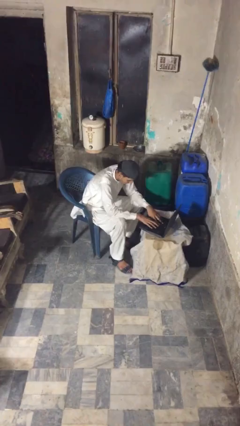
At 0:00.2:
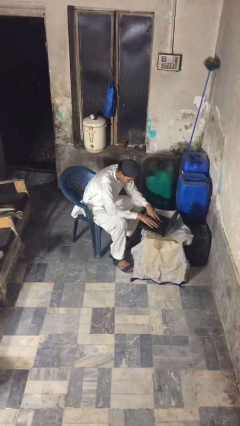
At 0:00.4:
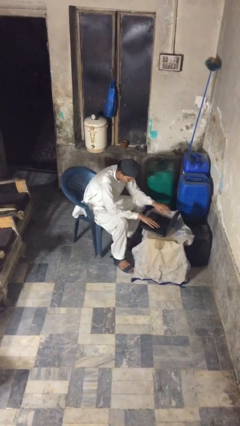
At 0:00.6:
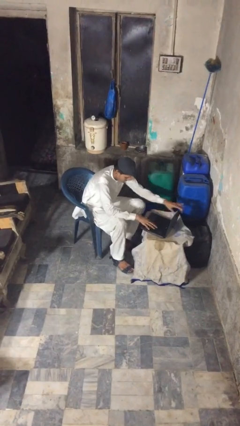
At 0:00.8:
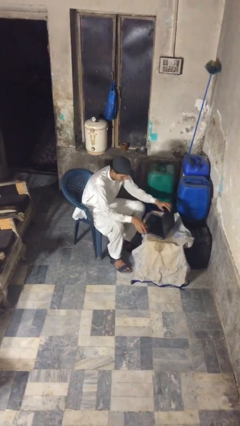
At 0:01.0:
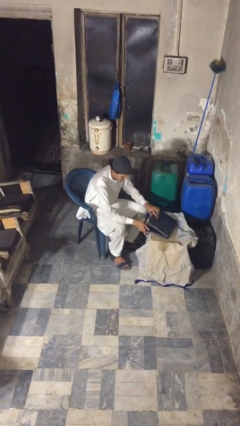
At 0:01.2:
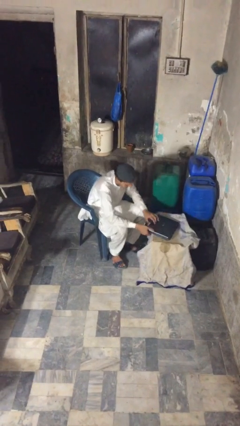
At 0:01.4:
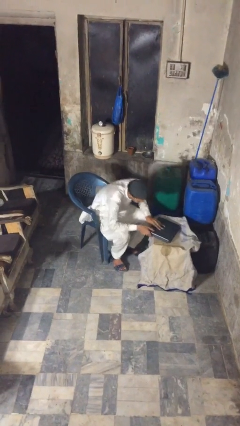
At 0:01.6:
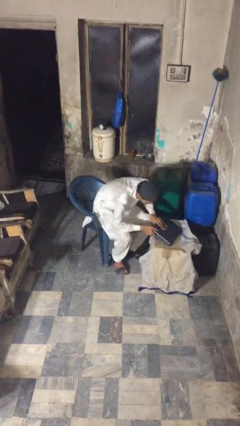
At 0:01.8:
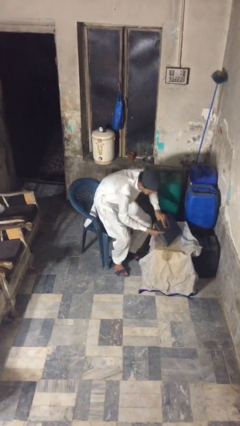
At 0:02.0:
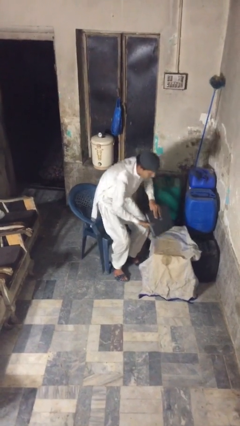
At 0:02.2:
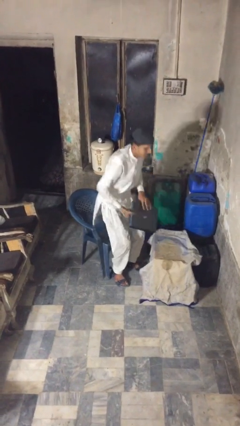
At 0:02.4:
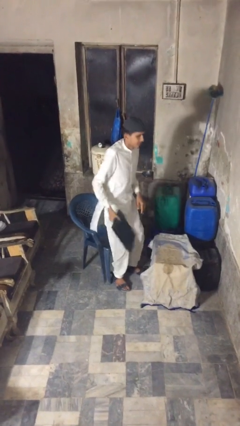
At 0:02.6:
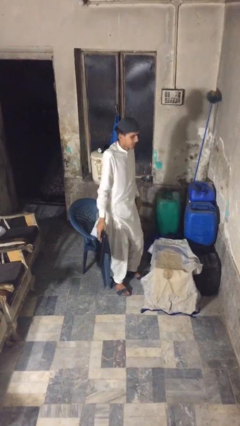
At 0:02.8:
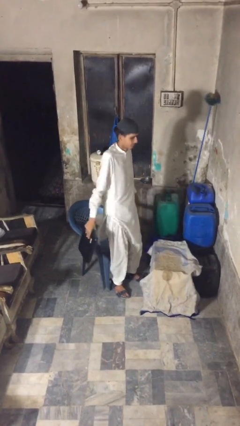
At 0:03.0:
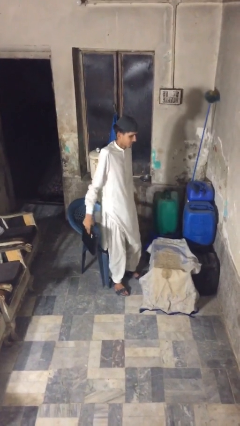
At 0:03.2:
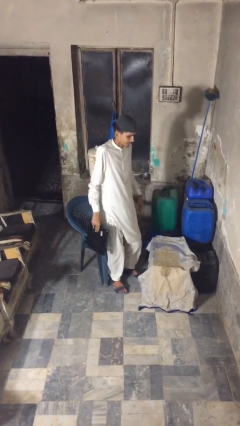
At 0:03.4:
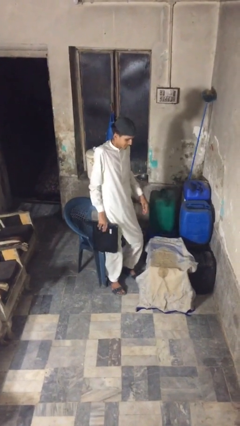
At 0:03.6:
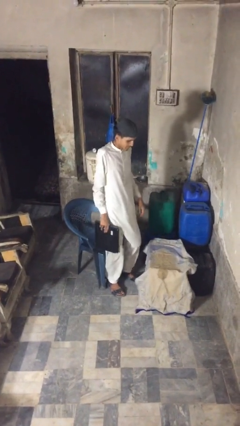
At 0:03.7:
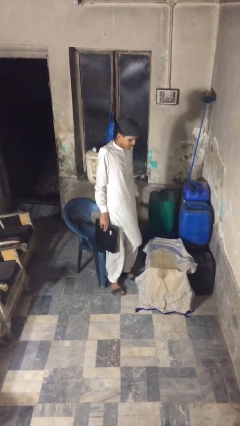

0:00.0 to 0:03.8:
person stands up

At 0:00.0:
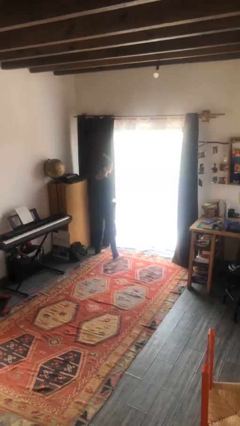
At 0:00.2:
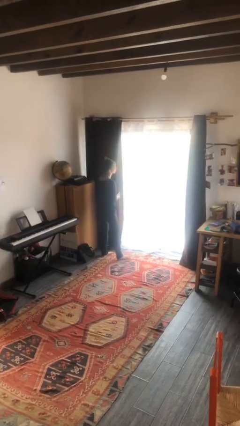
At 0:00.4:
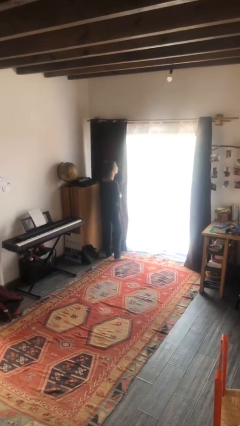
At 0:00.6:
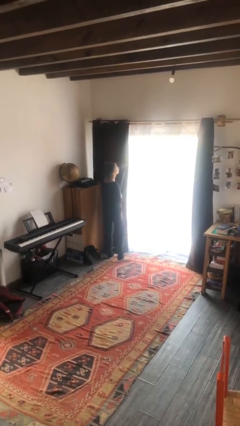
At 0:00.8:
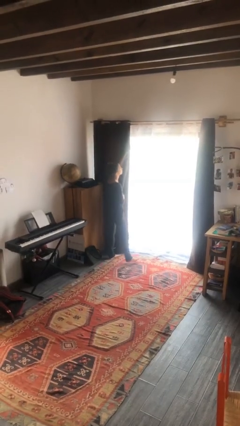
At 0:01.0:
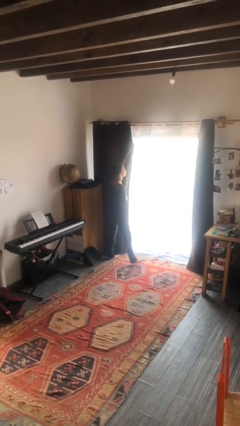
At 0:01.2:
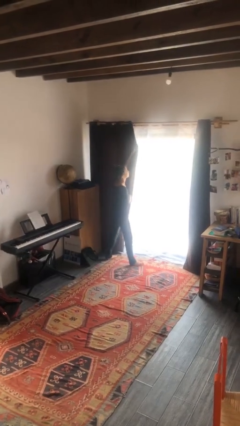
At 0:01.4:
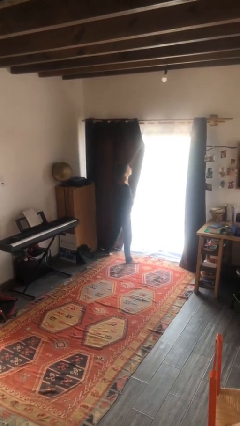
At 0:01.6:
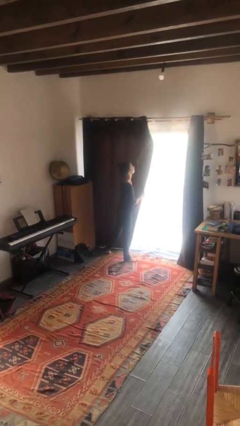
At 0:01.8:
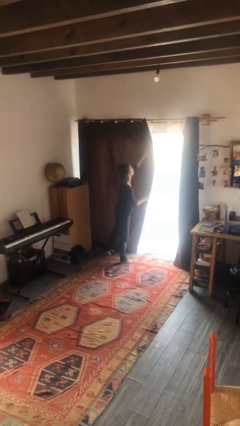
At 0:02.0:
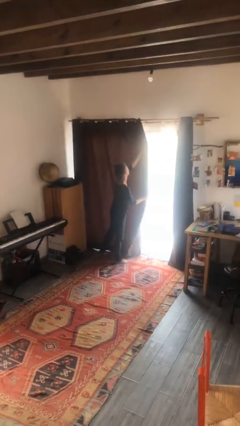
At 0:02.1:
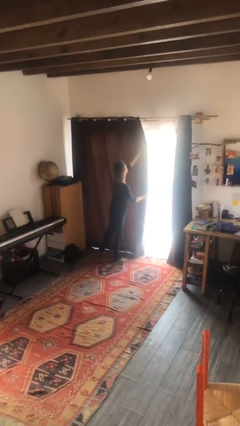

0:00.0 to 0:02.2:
person closes curtains

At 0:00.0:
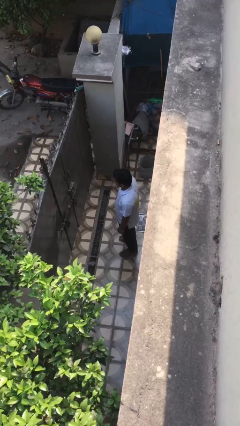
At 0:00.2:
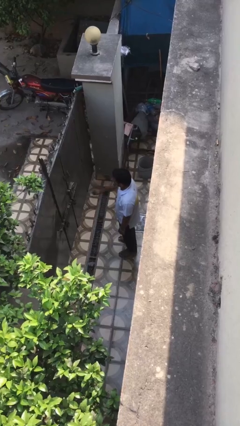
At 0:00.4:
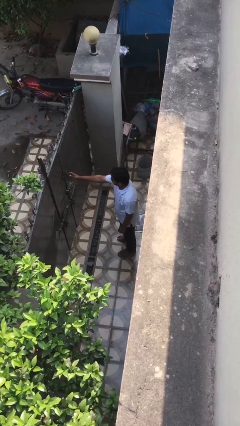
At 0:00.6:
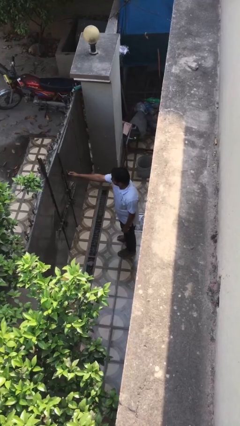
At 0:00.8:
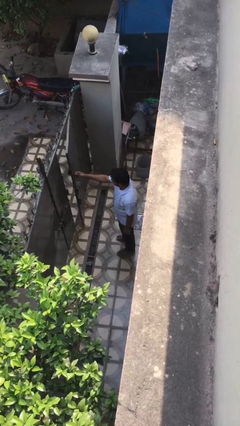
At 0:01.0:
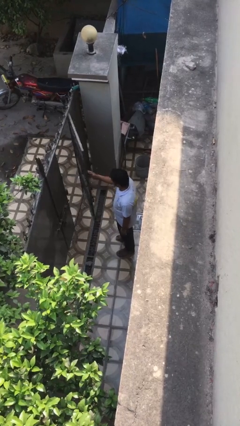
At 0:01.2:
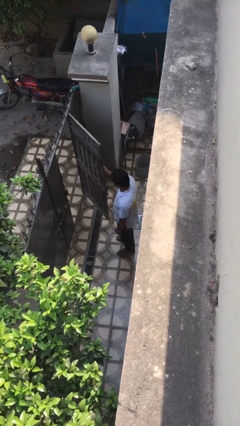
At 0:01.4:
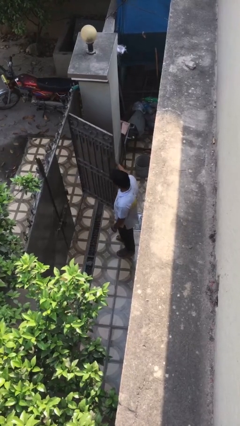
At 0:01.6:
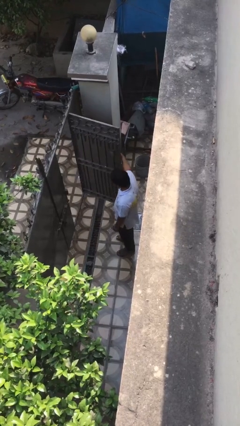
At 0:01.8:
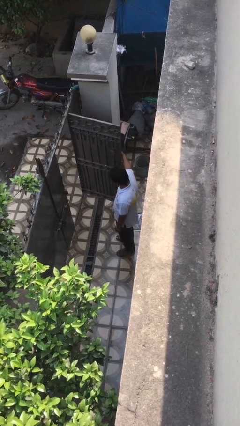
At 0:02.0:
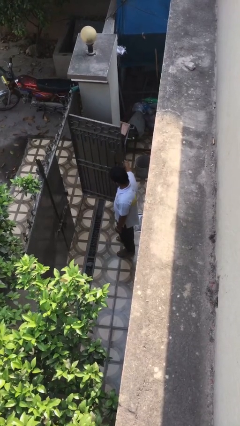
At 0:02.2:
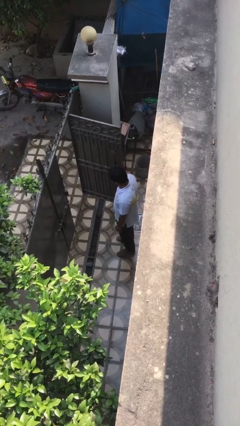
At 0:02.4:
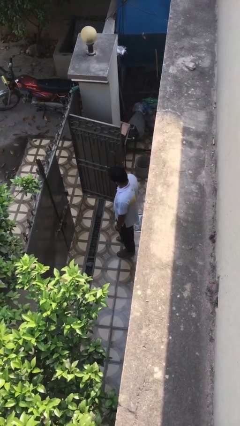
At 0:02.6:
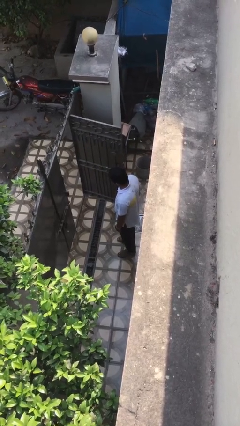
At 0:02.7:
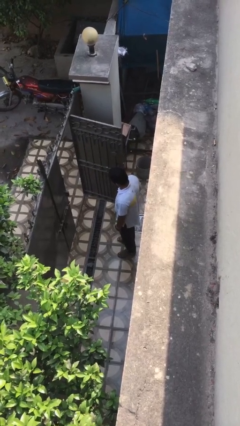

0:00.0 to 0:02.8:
person opens facility door

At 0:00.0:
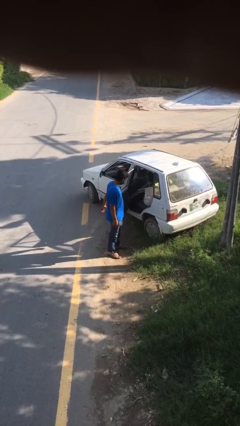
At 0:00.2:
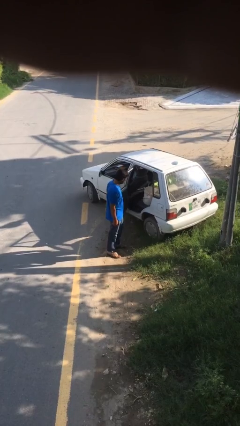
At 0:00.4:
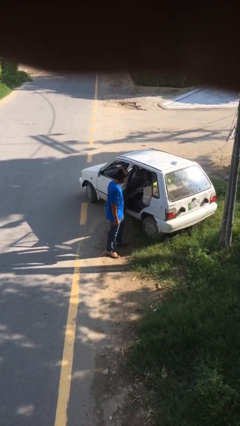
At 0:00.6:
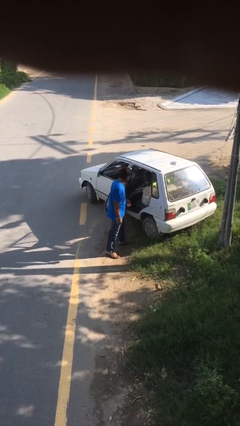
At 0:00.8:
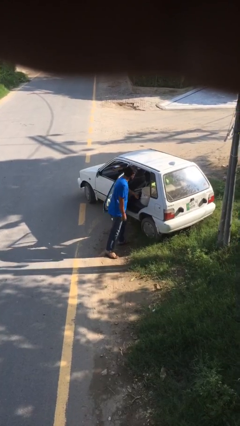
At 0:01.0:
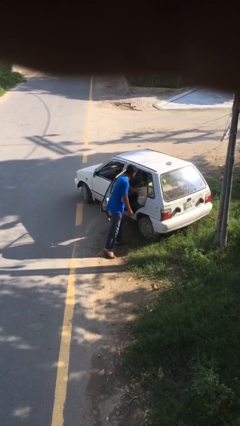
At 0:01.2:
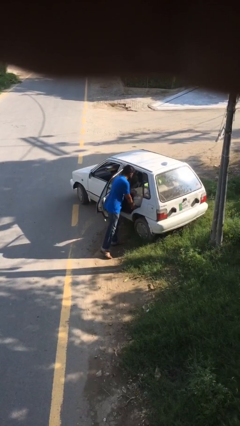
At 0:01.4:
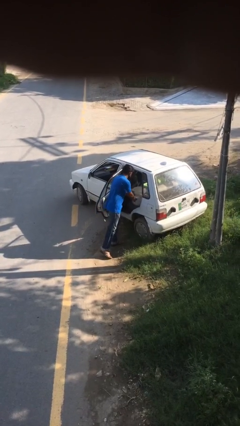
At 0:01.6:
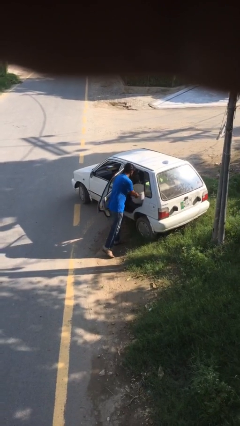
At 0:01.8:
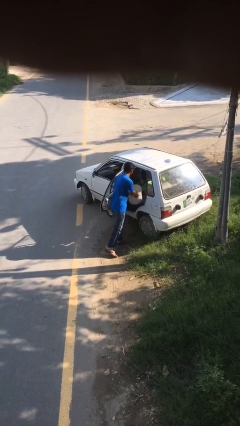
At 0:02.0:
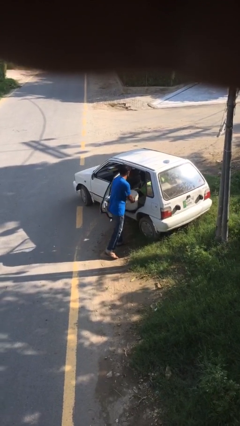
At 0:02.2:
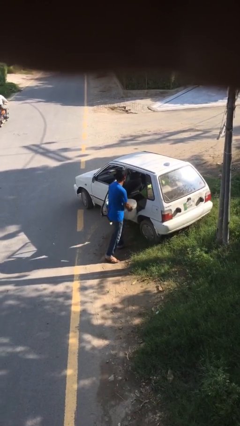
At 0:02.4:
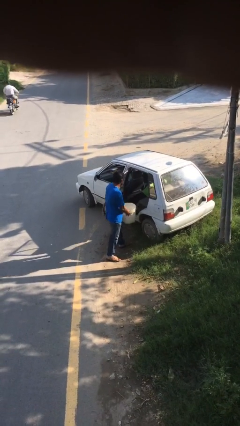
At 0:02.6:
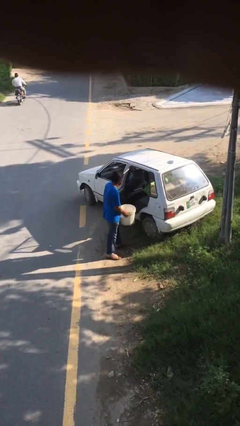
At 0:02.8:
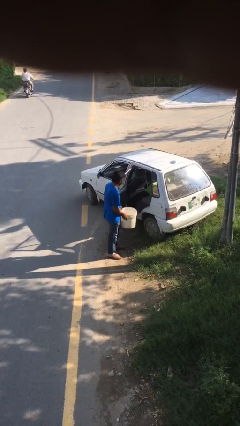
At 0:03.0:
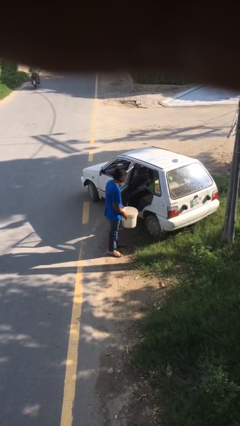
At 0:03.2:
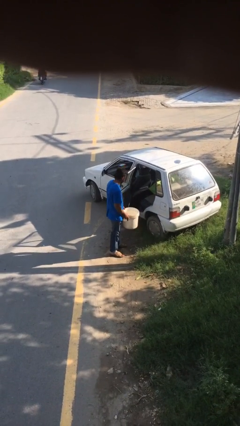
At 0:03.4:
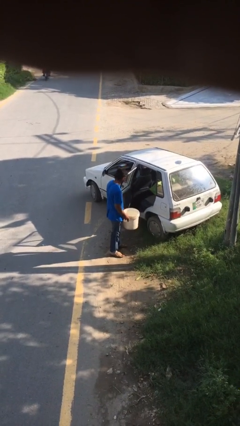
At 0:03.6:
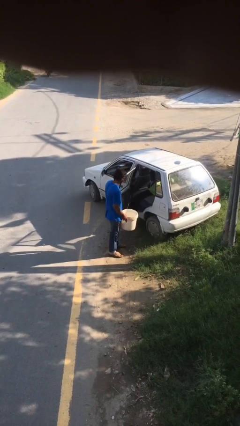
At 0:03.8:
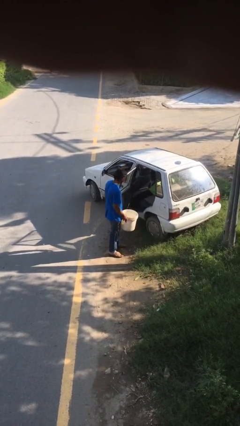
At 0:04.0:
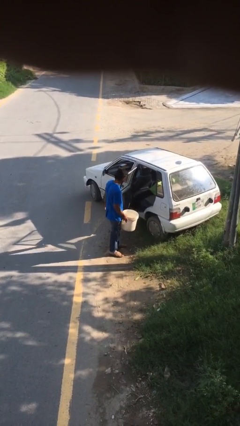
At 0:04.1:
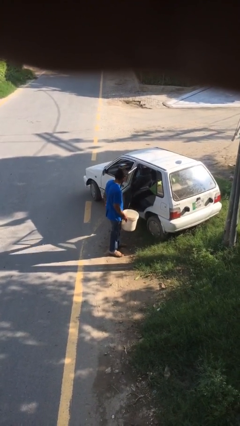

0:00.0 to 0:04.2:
person unloads car

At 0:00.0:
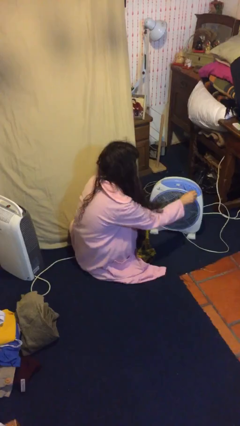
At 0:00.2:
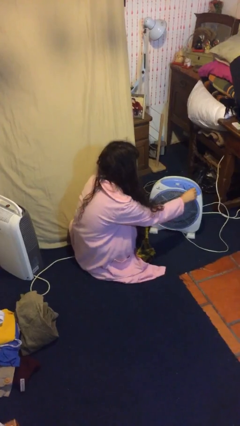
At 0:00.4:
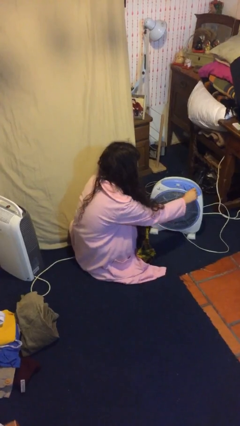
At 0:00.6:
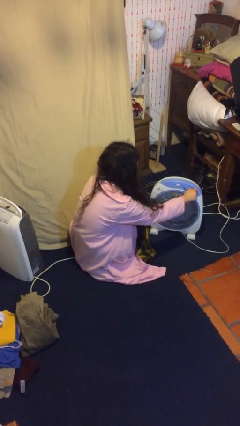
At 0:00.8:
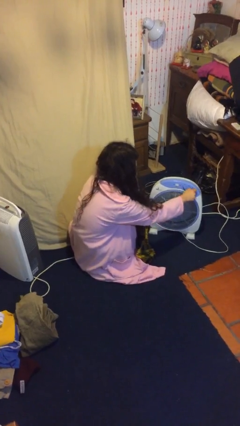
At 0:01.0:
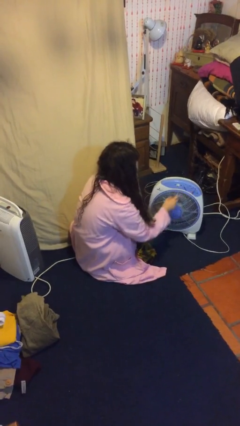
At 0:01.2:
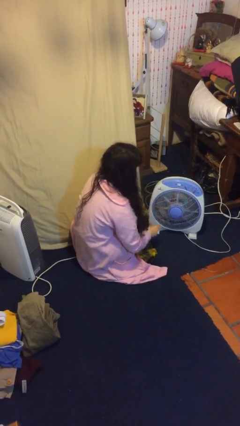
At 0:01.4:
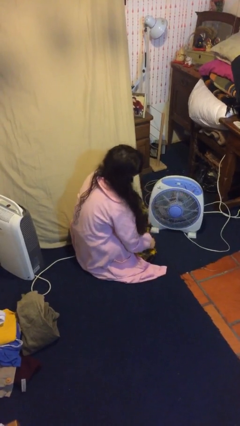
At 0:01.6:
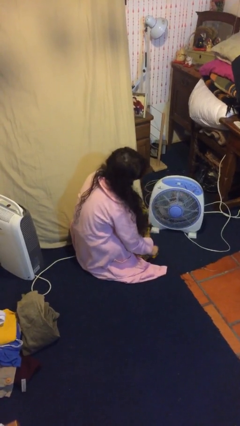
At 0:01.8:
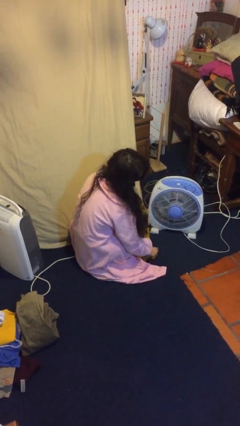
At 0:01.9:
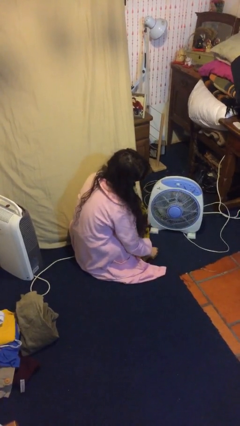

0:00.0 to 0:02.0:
person turns off fan

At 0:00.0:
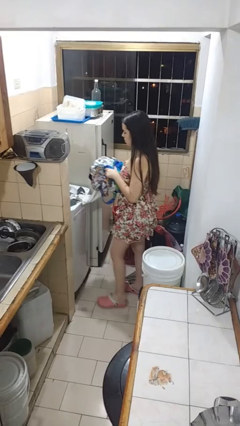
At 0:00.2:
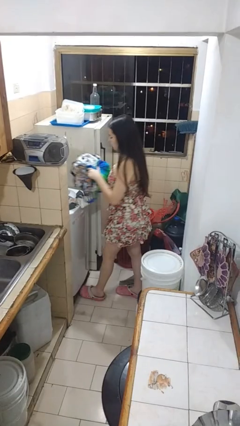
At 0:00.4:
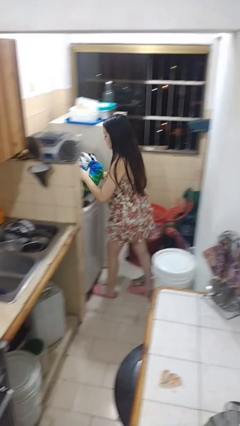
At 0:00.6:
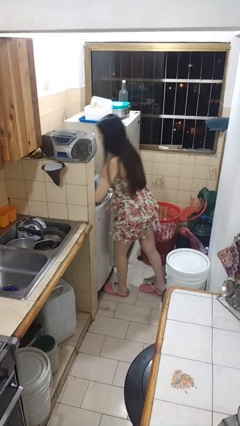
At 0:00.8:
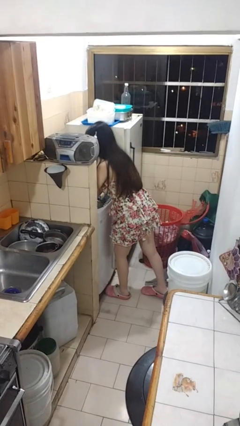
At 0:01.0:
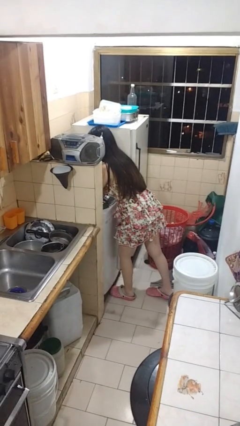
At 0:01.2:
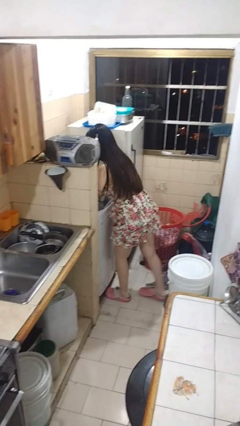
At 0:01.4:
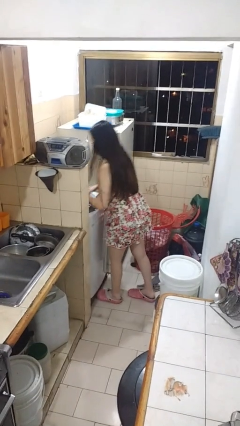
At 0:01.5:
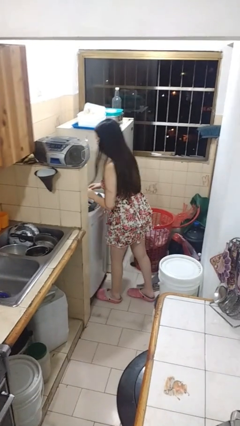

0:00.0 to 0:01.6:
person loads clotheswasher

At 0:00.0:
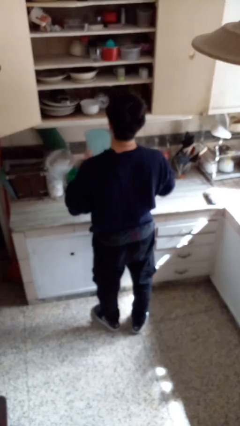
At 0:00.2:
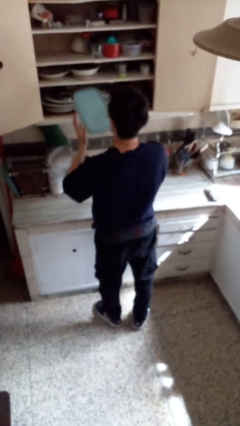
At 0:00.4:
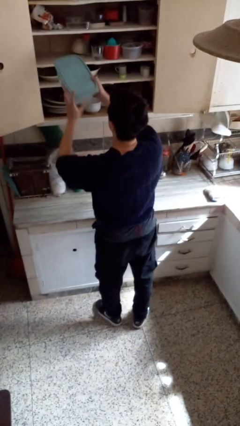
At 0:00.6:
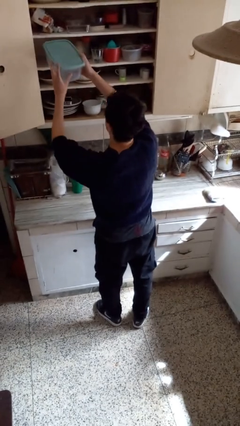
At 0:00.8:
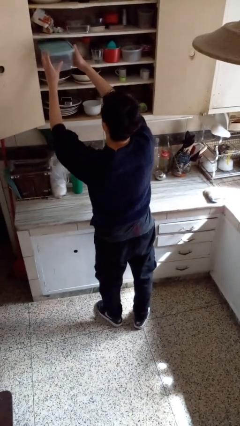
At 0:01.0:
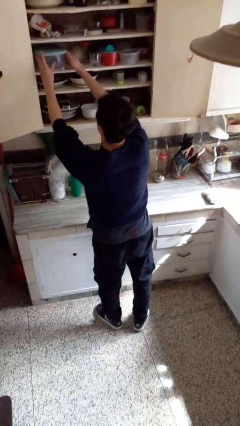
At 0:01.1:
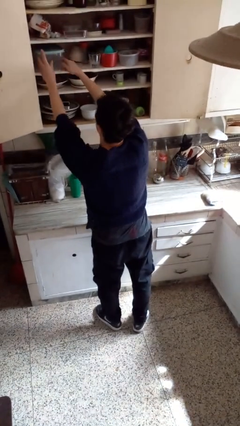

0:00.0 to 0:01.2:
person puts down object into cabinet
